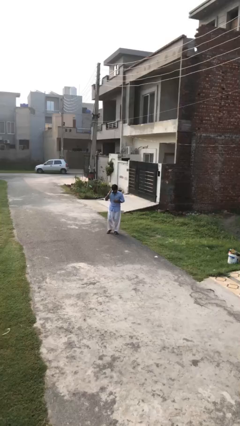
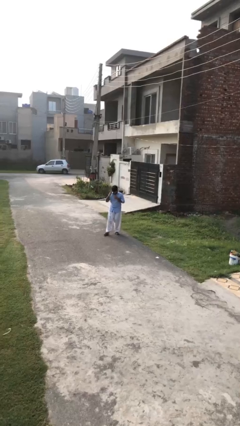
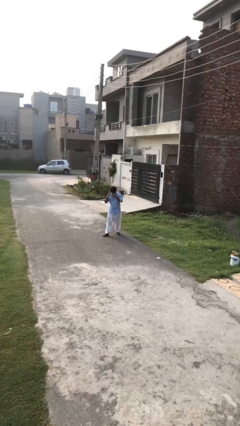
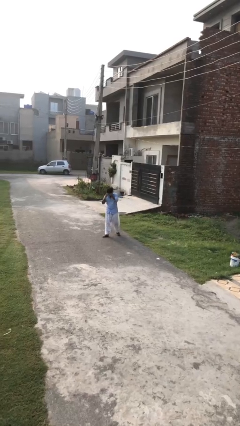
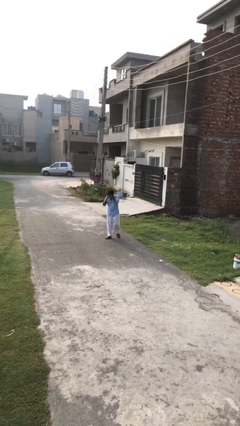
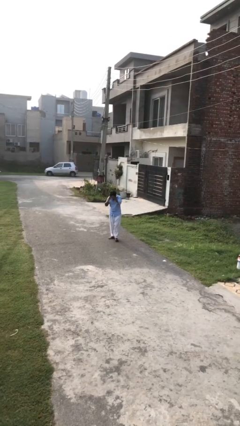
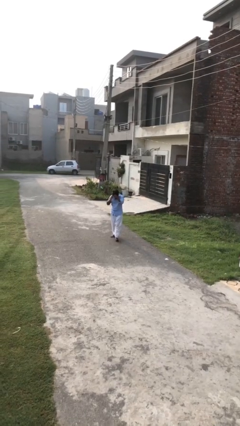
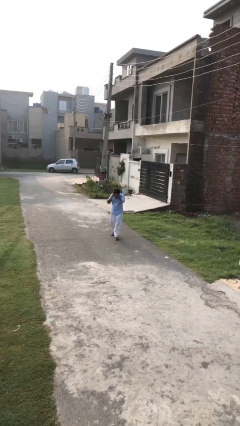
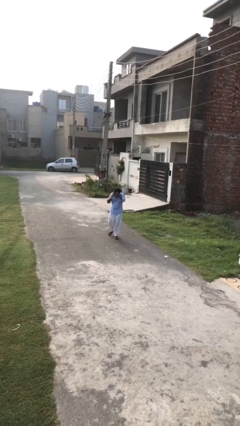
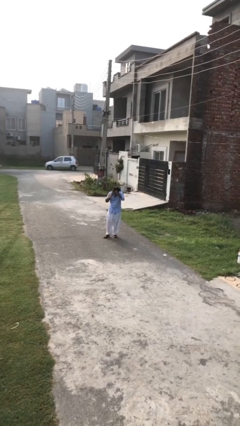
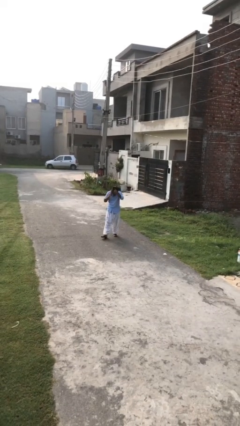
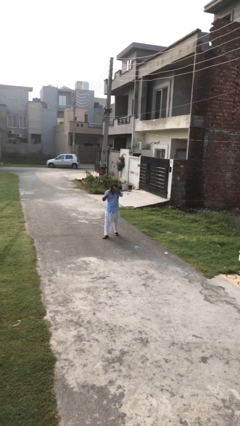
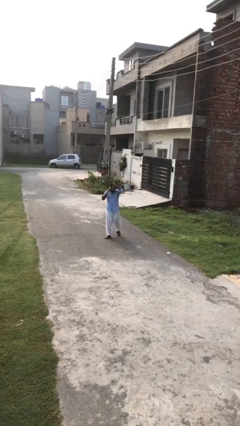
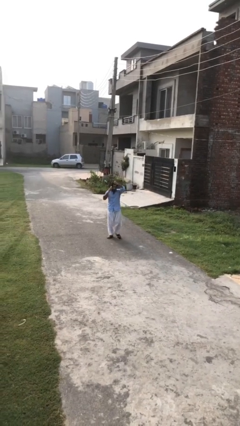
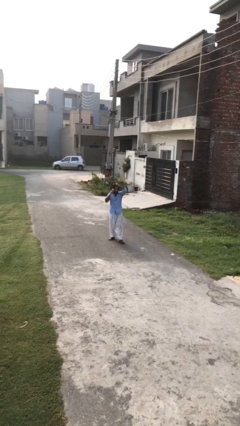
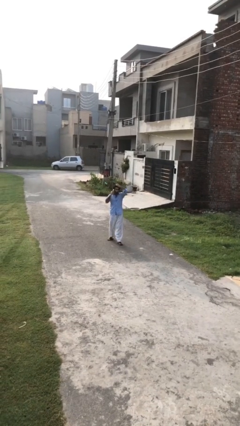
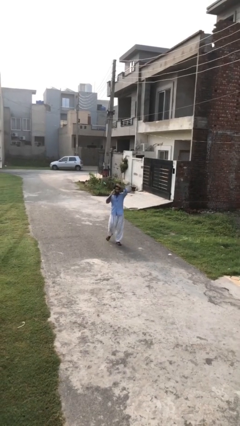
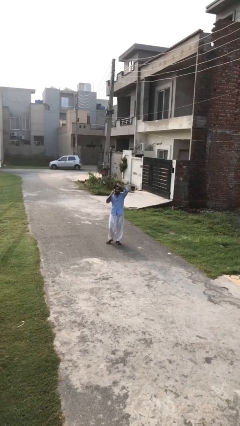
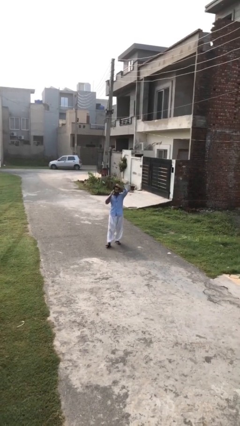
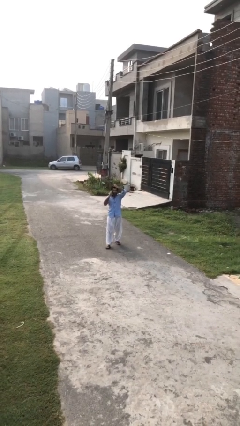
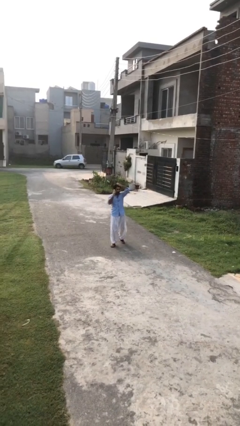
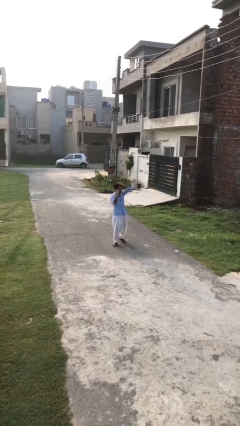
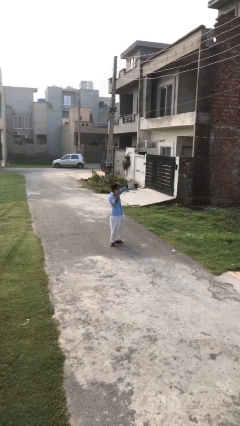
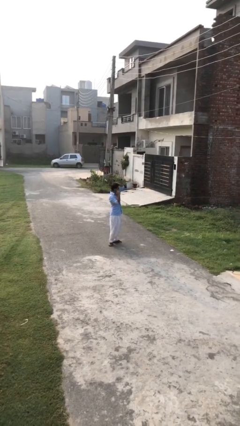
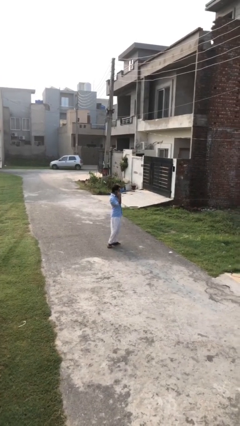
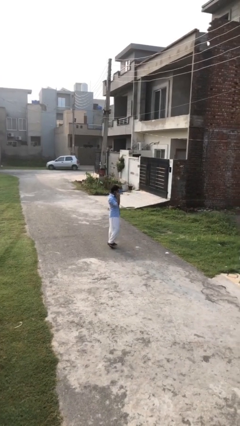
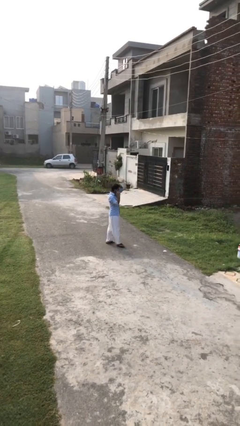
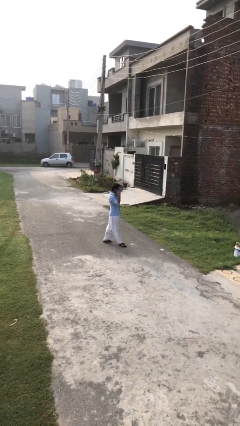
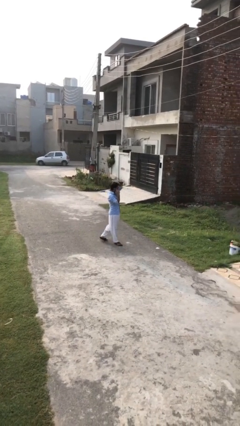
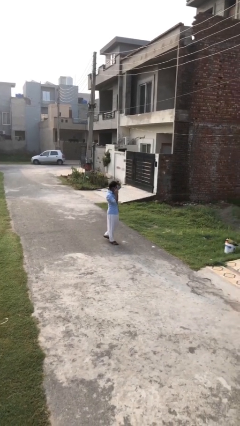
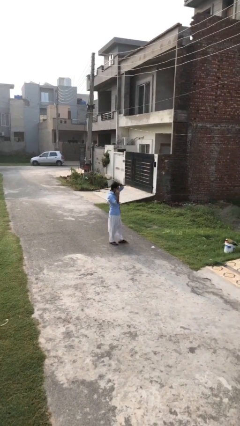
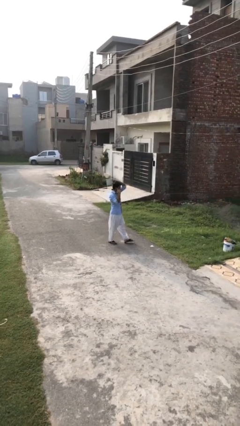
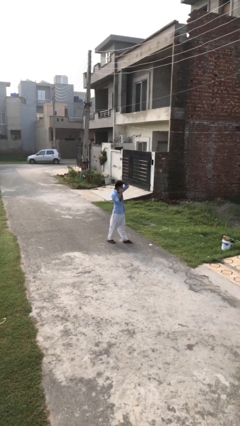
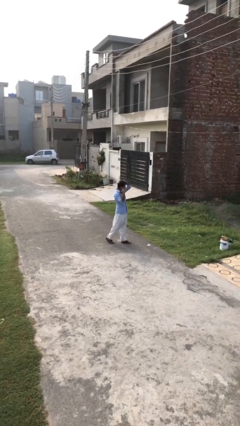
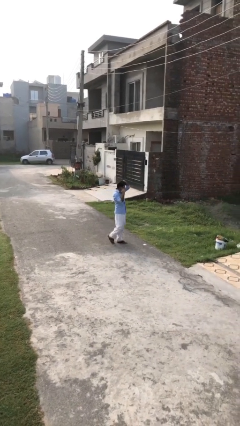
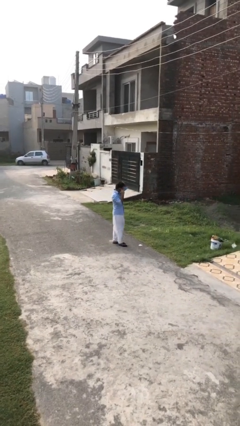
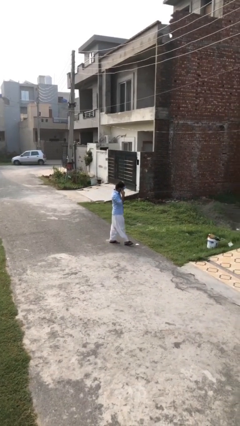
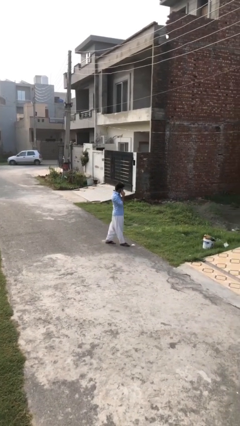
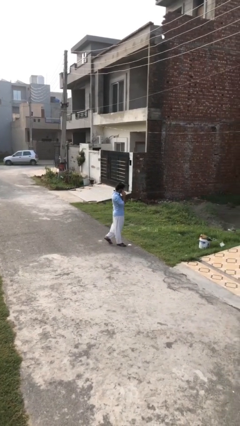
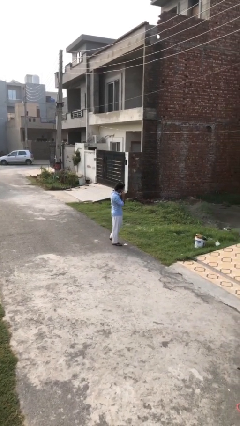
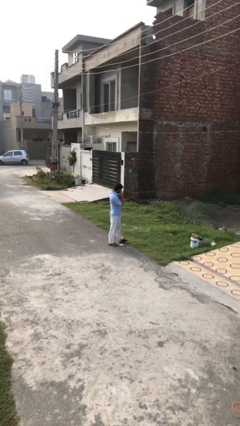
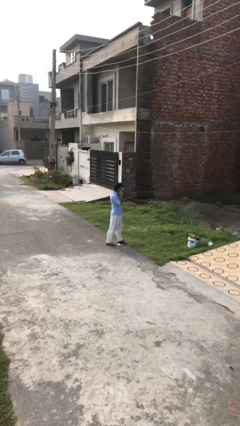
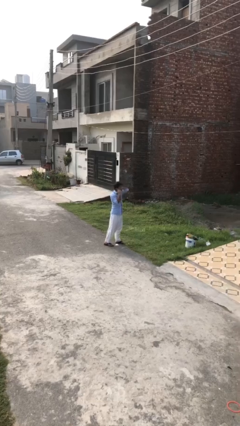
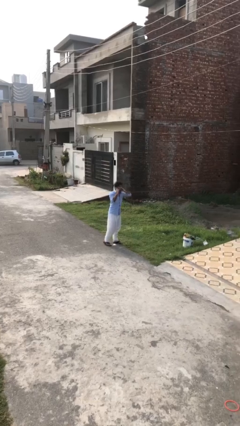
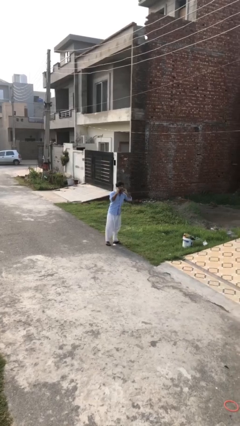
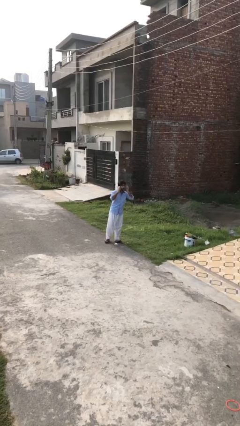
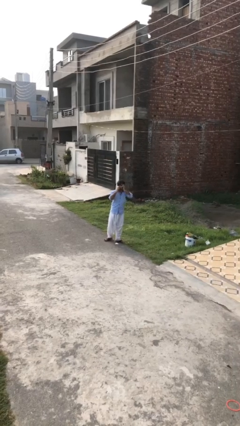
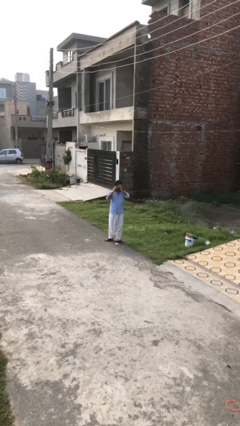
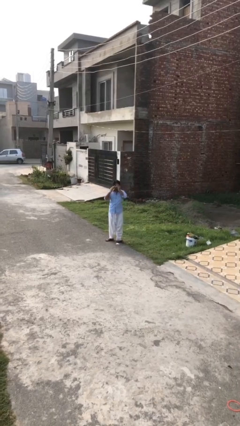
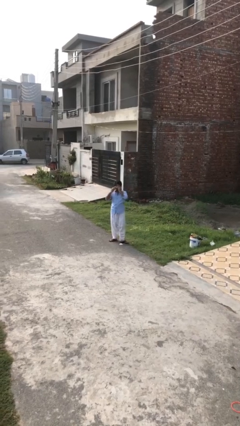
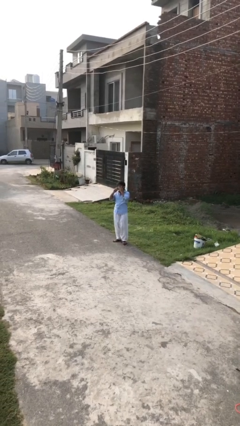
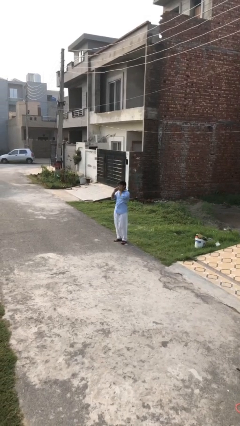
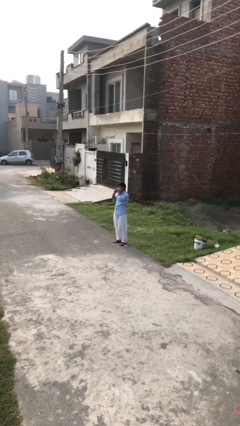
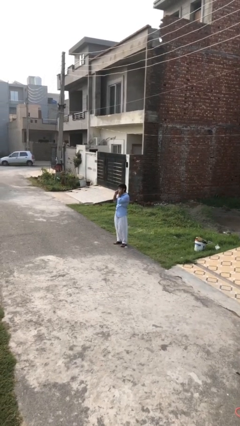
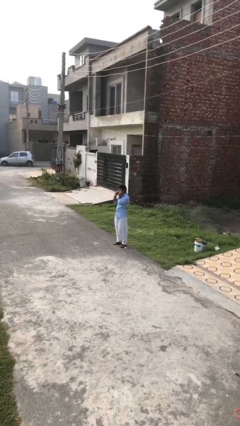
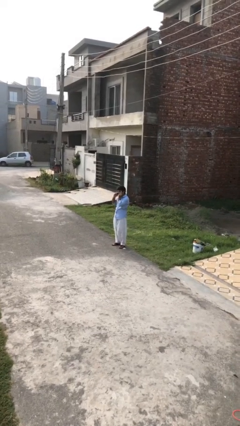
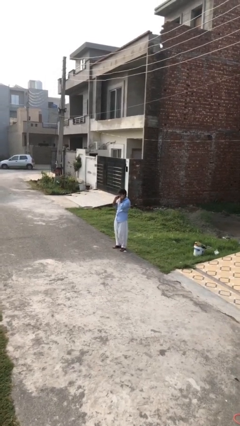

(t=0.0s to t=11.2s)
person talks on phone

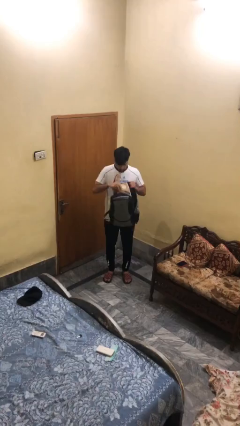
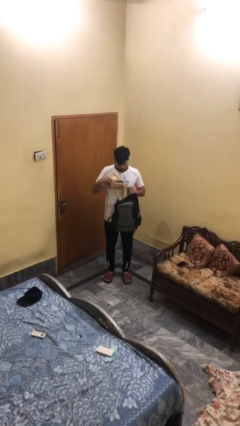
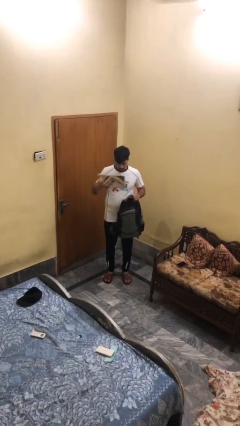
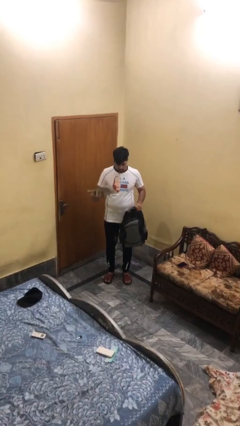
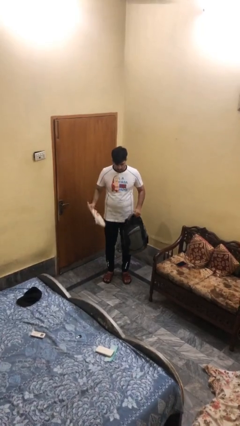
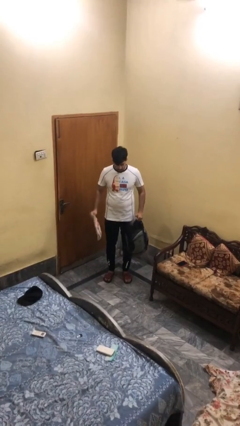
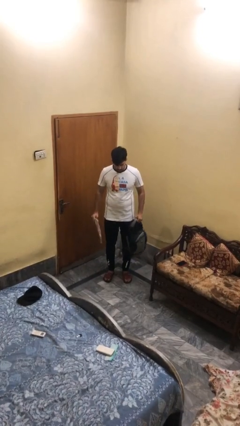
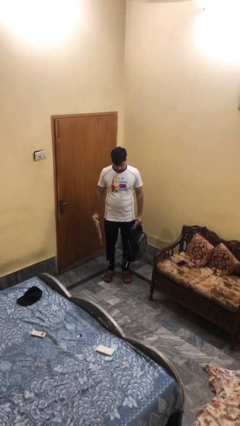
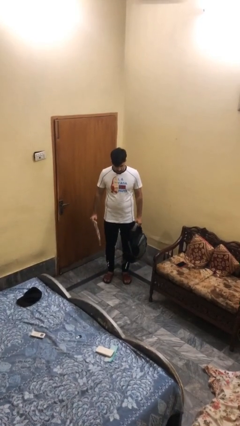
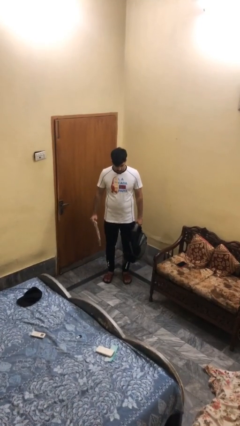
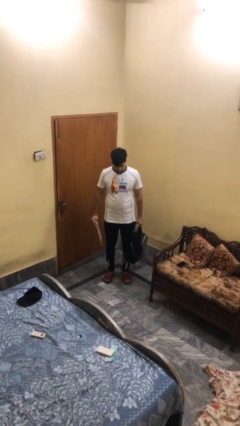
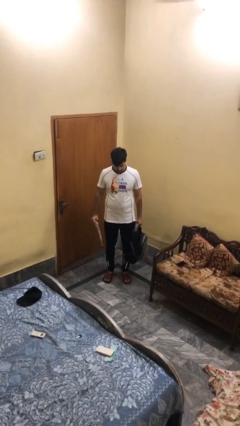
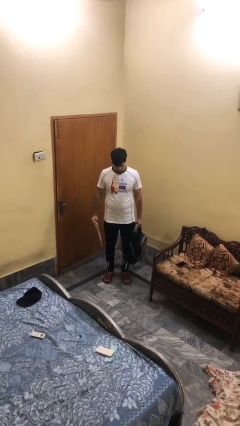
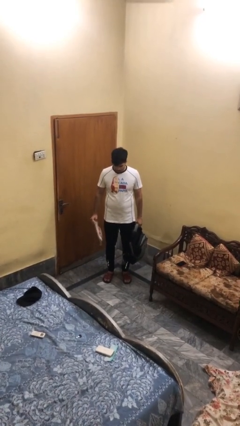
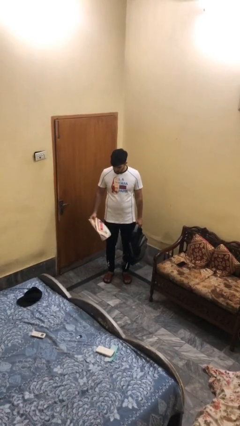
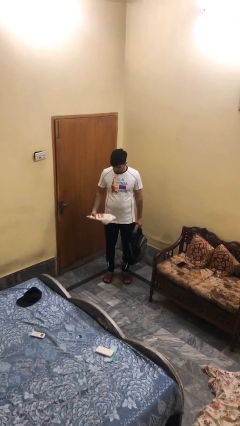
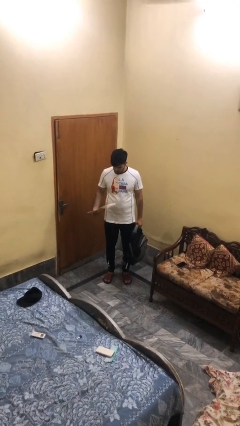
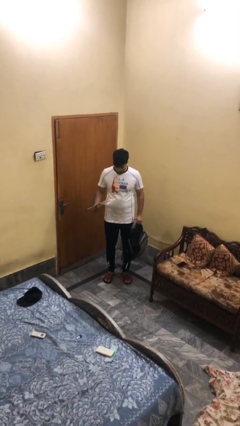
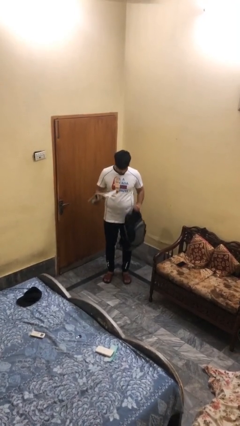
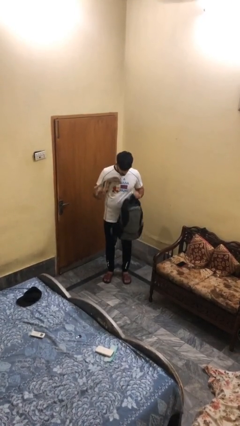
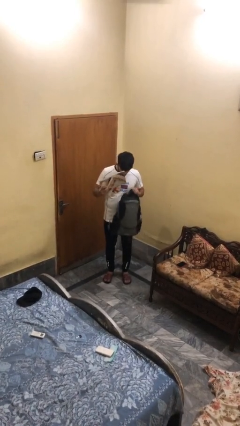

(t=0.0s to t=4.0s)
person takes object from backpack

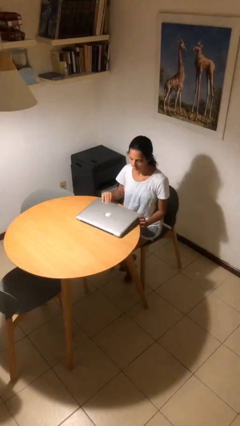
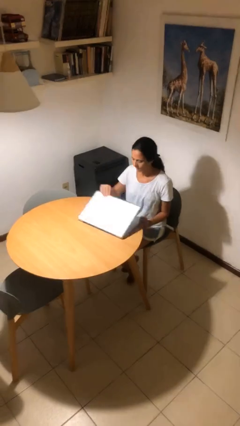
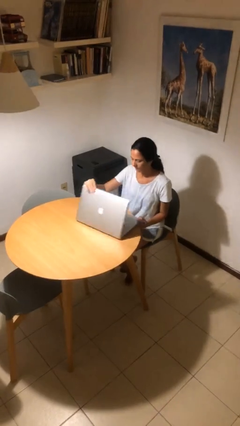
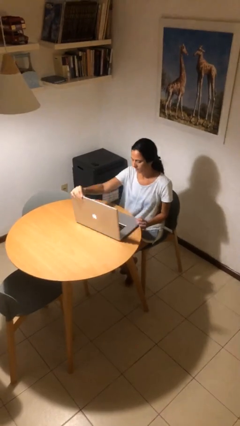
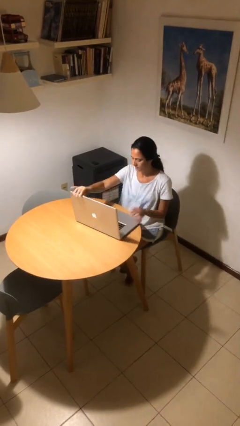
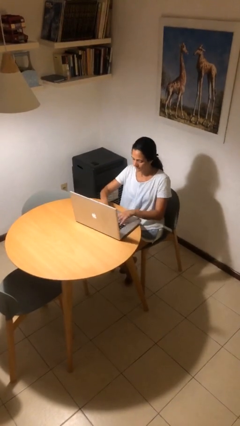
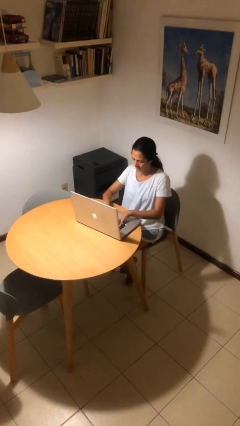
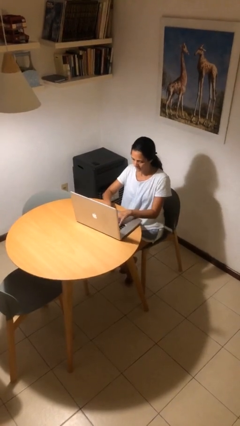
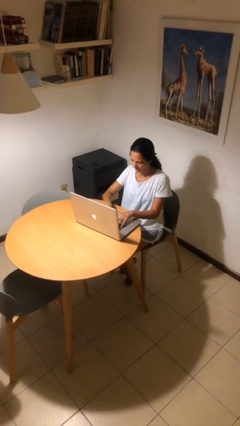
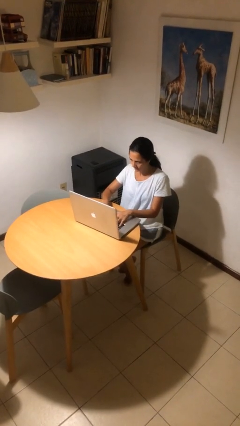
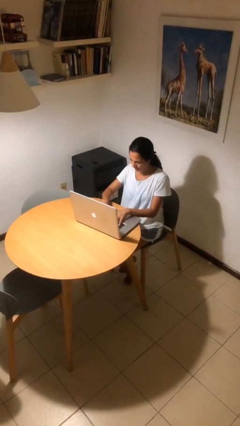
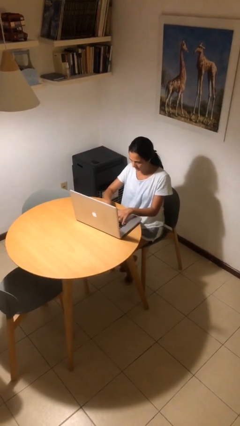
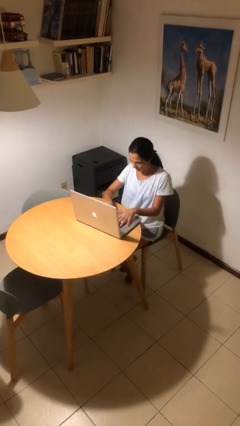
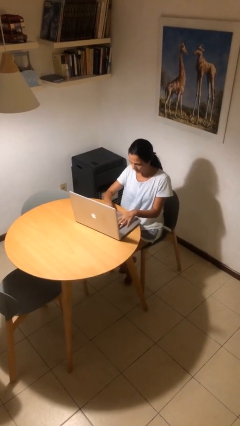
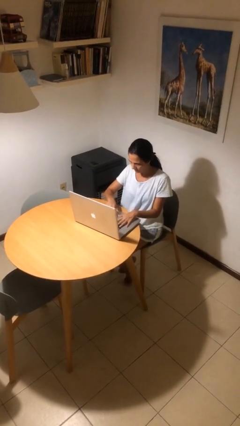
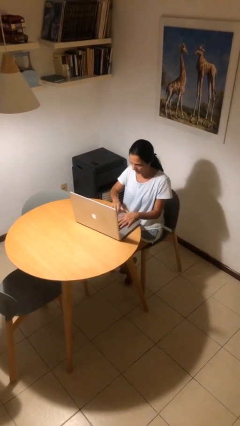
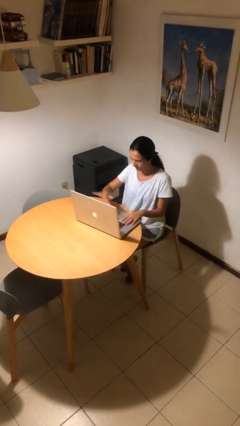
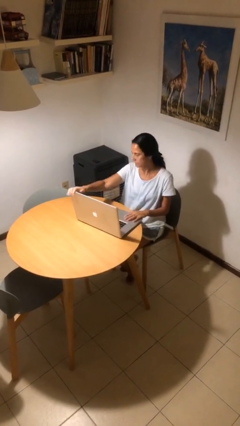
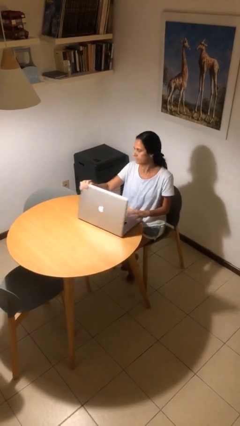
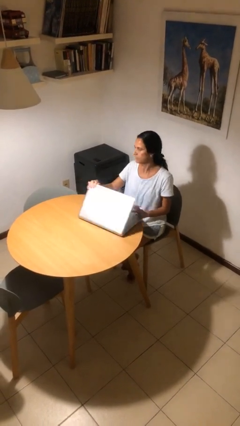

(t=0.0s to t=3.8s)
person interacts with laptop
